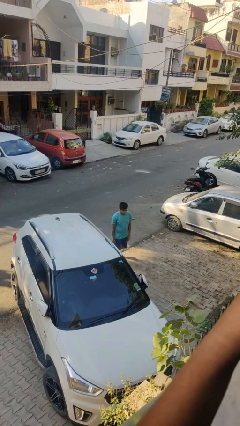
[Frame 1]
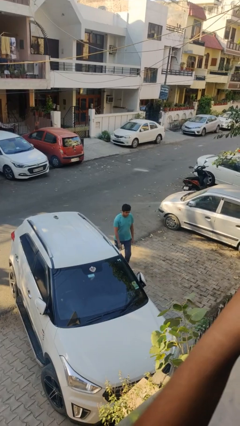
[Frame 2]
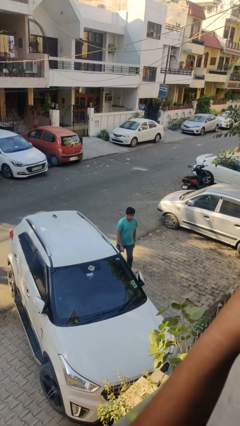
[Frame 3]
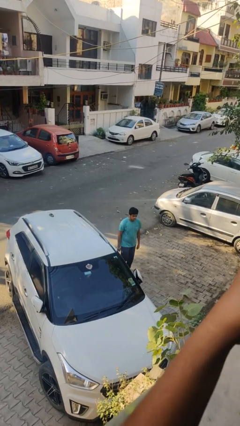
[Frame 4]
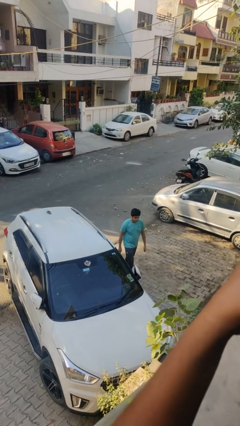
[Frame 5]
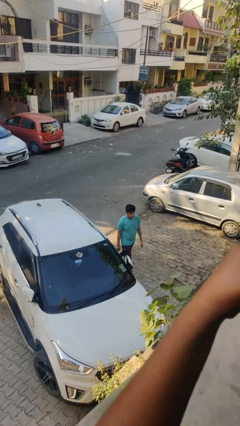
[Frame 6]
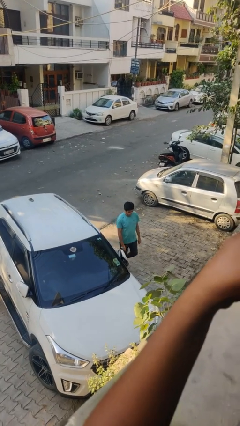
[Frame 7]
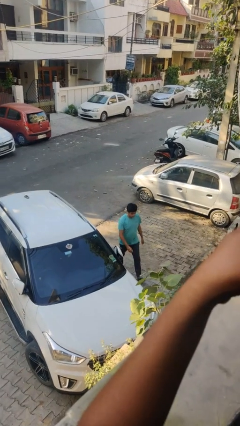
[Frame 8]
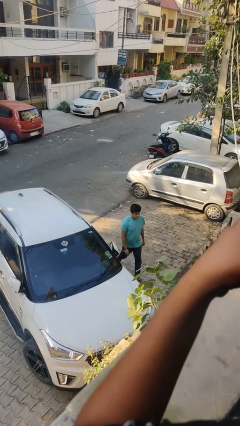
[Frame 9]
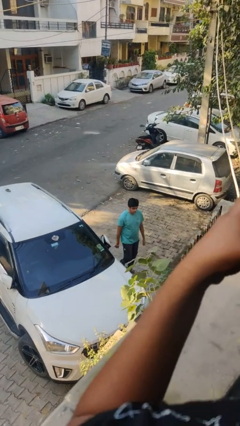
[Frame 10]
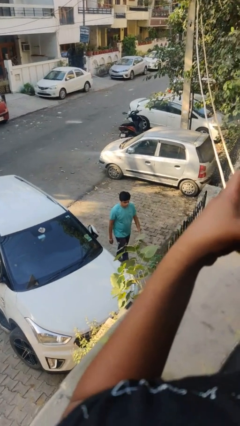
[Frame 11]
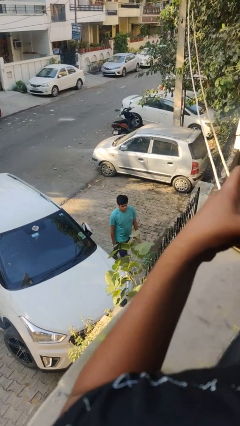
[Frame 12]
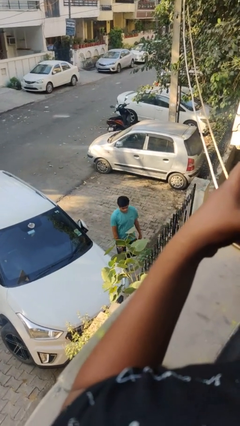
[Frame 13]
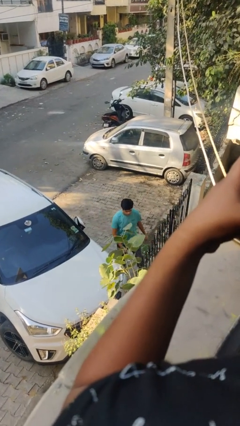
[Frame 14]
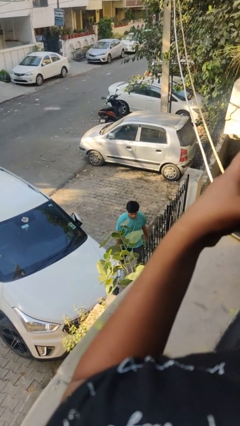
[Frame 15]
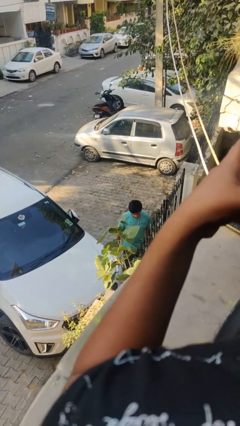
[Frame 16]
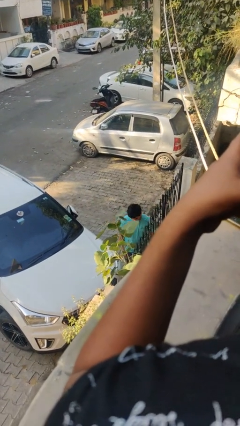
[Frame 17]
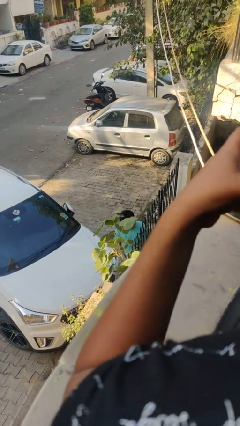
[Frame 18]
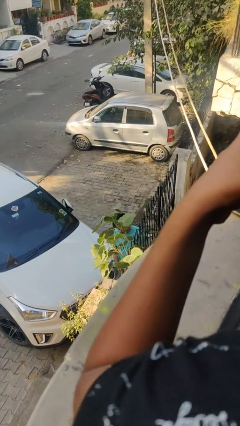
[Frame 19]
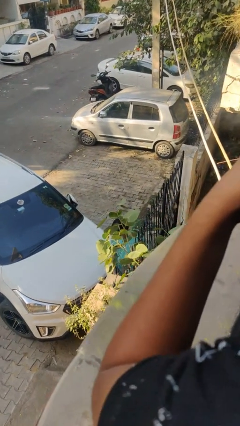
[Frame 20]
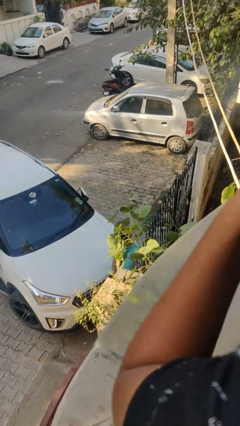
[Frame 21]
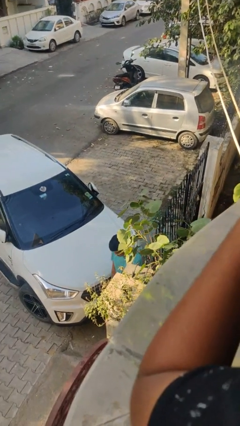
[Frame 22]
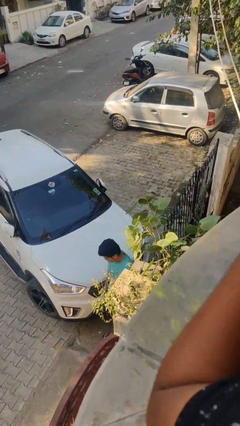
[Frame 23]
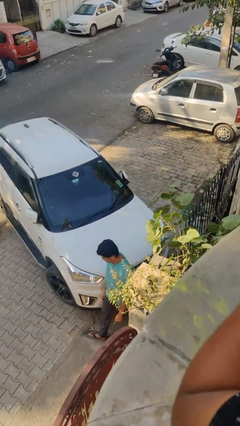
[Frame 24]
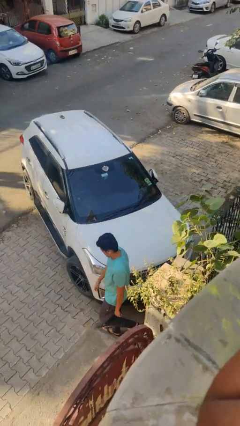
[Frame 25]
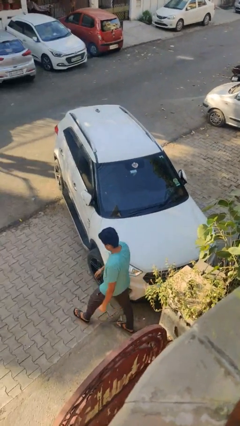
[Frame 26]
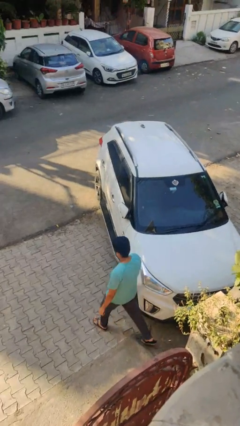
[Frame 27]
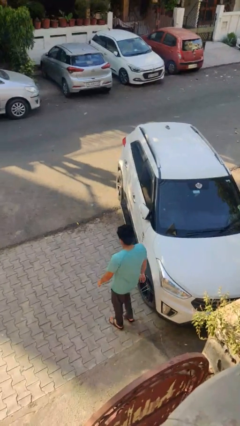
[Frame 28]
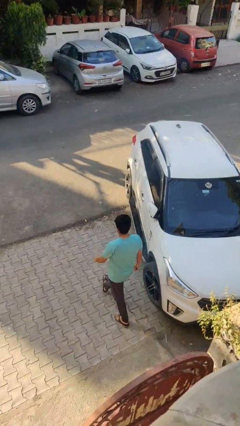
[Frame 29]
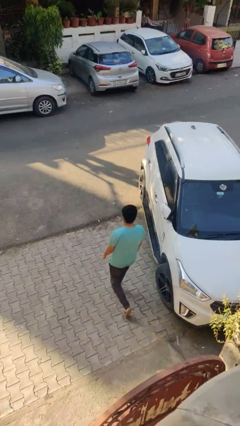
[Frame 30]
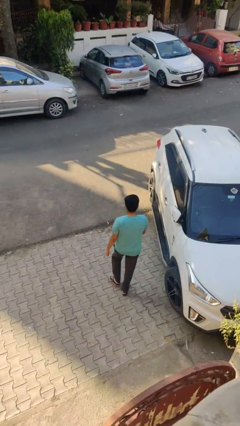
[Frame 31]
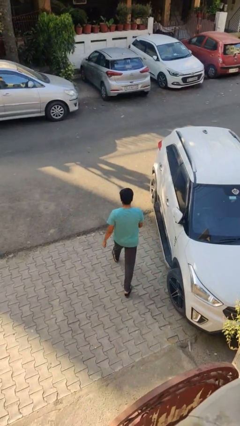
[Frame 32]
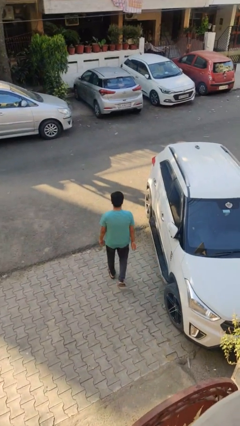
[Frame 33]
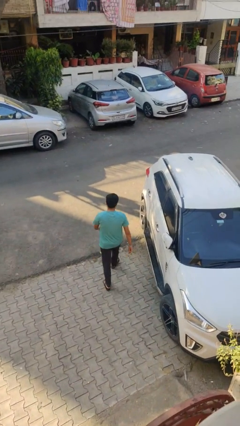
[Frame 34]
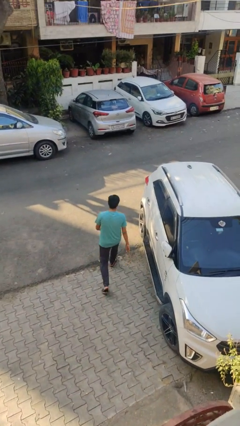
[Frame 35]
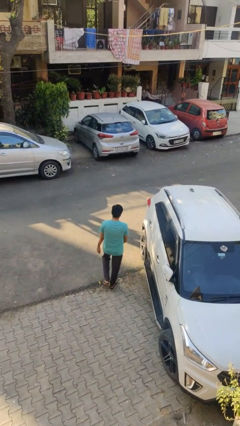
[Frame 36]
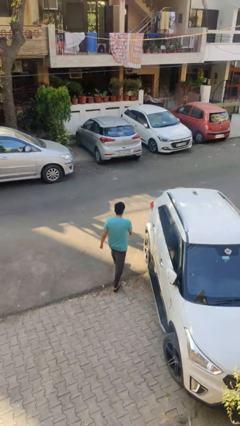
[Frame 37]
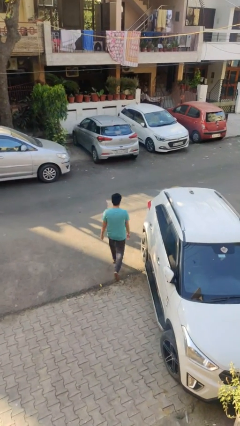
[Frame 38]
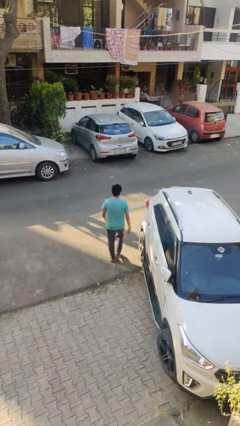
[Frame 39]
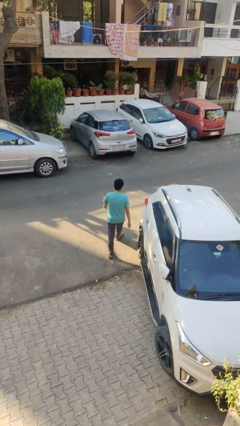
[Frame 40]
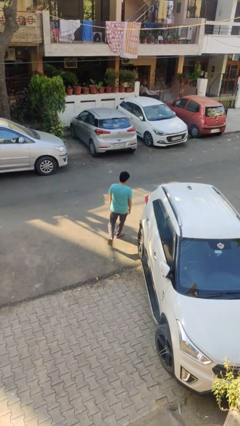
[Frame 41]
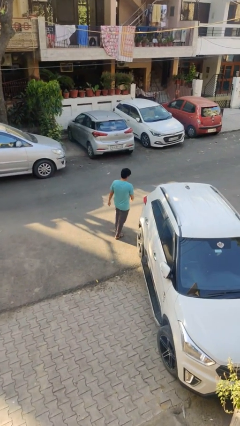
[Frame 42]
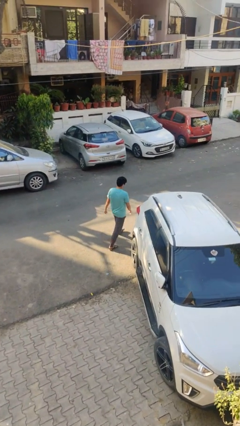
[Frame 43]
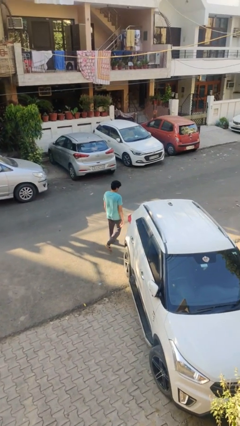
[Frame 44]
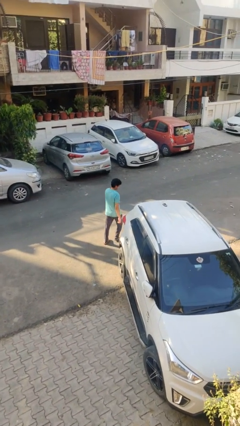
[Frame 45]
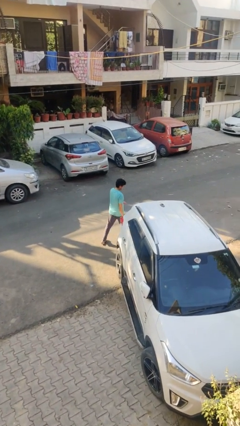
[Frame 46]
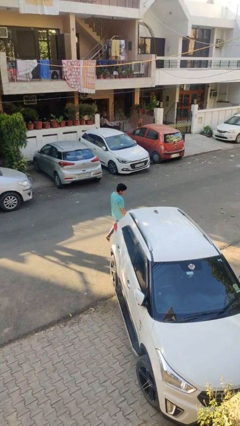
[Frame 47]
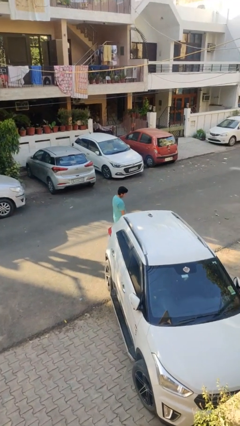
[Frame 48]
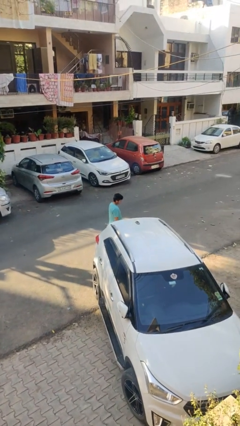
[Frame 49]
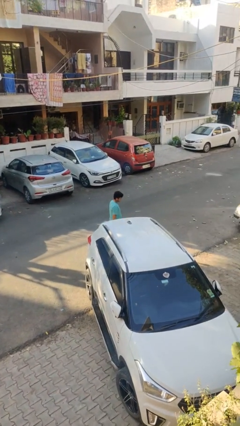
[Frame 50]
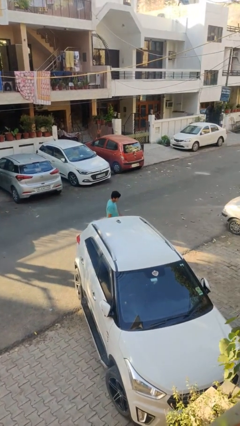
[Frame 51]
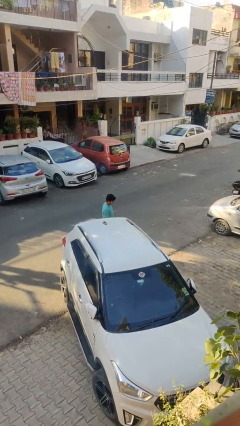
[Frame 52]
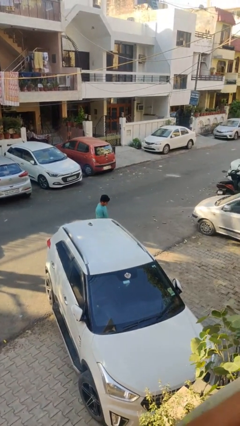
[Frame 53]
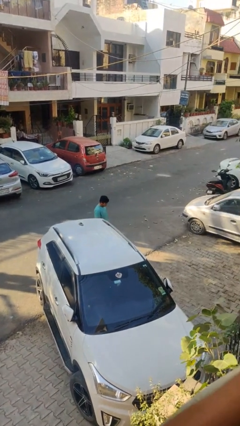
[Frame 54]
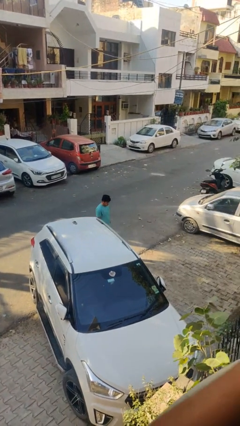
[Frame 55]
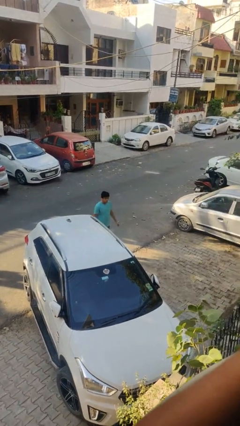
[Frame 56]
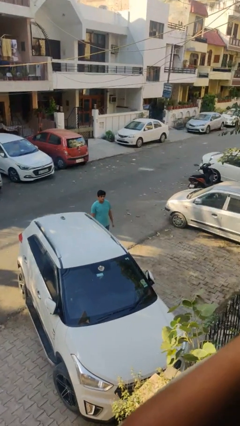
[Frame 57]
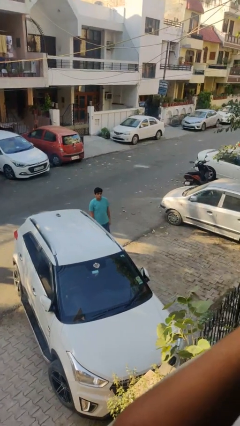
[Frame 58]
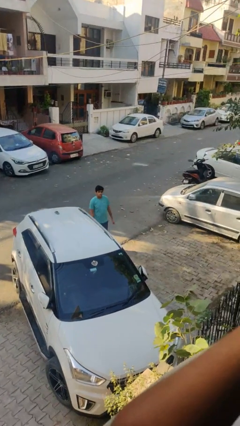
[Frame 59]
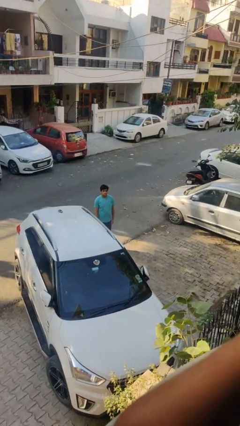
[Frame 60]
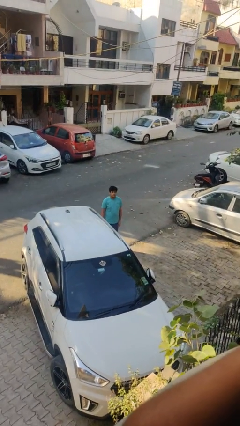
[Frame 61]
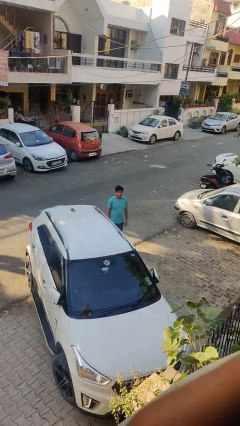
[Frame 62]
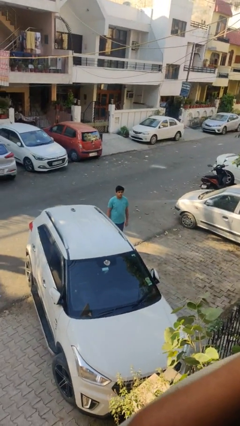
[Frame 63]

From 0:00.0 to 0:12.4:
person walks around car

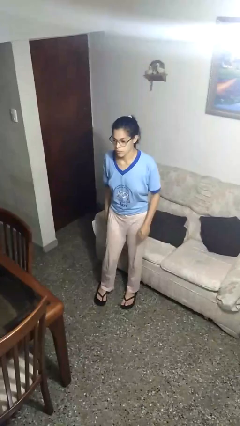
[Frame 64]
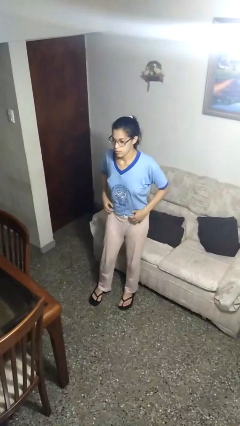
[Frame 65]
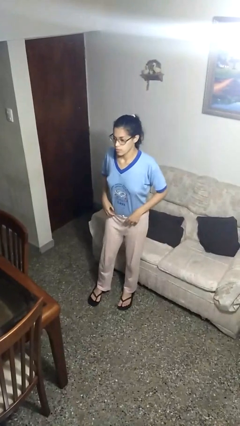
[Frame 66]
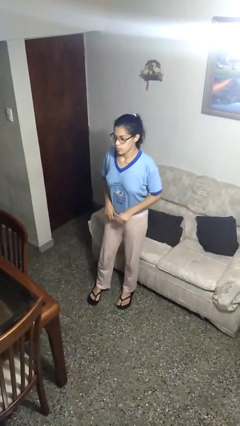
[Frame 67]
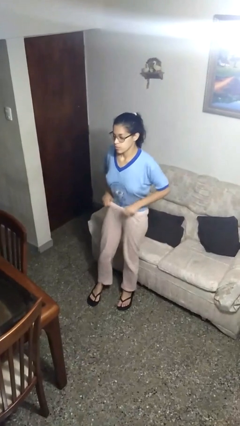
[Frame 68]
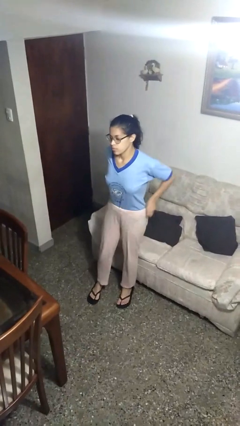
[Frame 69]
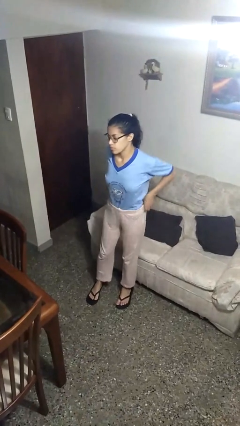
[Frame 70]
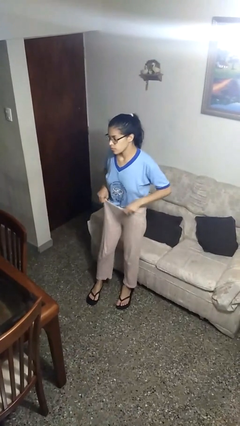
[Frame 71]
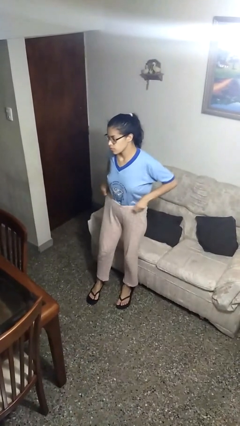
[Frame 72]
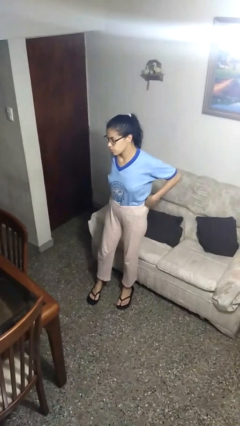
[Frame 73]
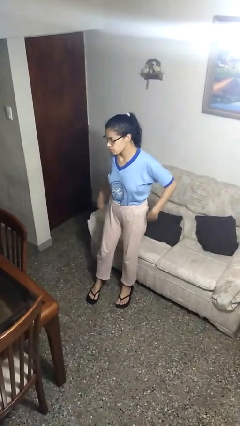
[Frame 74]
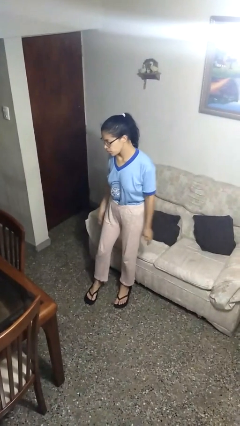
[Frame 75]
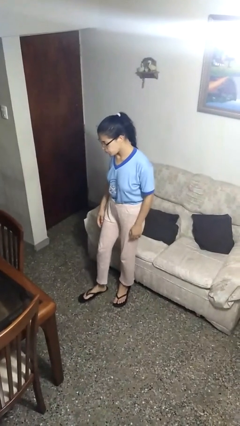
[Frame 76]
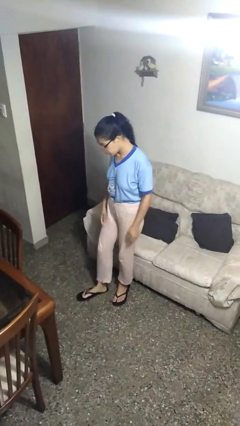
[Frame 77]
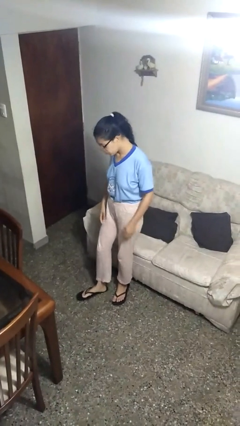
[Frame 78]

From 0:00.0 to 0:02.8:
person hikes up pants

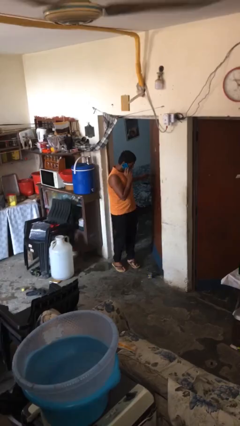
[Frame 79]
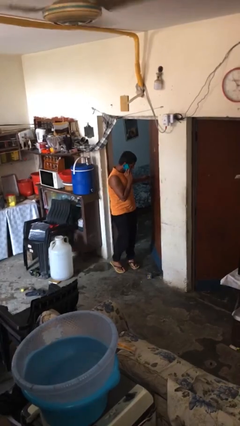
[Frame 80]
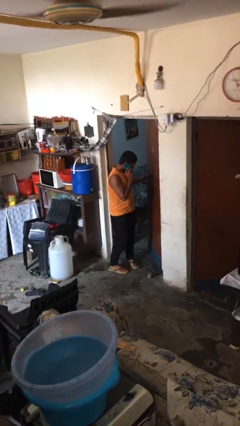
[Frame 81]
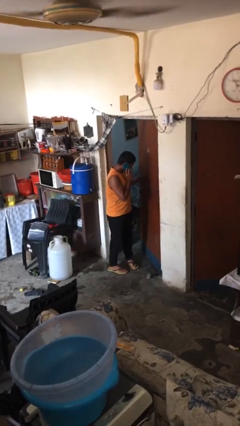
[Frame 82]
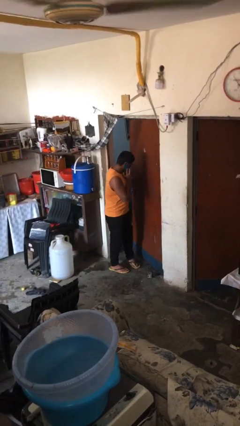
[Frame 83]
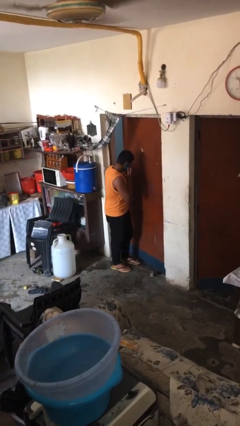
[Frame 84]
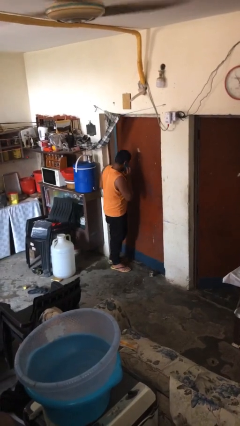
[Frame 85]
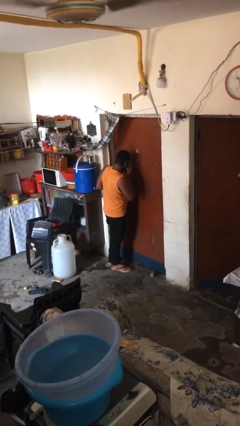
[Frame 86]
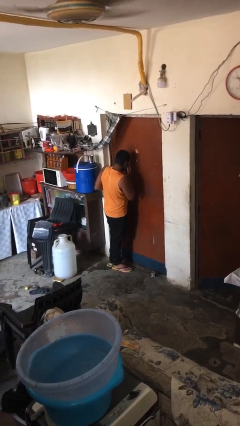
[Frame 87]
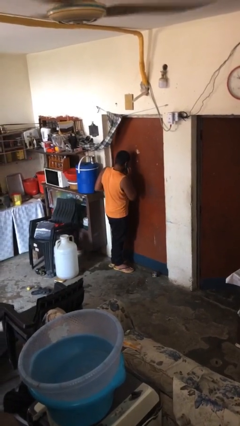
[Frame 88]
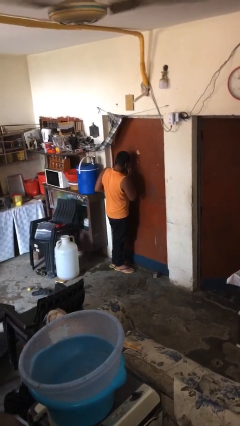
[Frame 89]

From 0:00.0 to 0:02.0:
person closes facility door

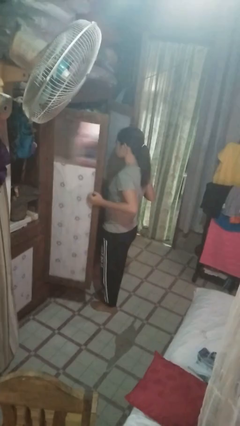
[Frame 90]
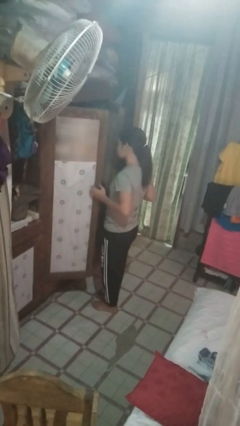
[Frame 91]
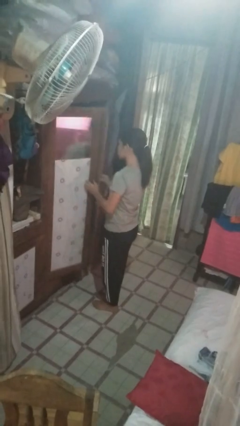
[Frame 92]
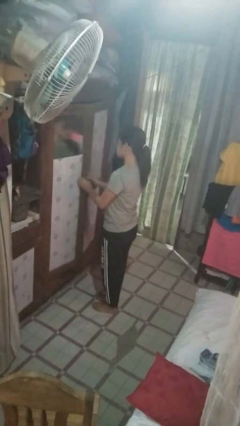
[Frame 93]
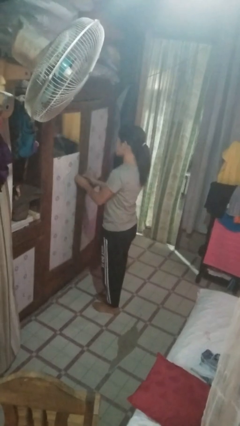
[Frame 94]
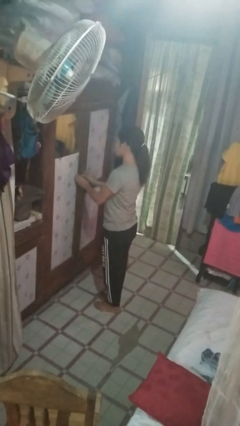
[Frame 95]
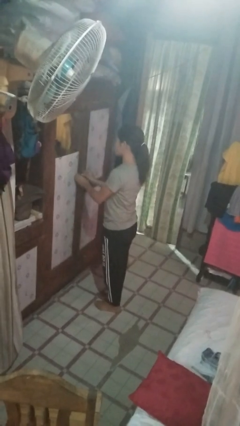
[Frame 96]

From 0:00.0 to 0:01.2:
person closes closet door
